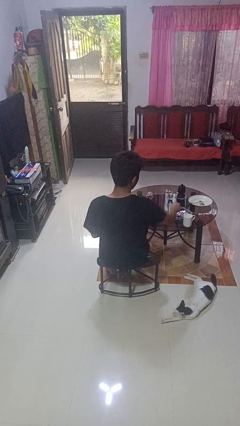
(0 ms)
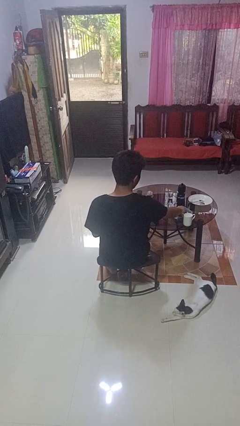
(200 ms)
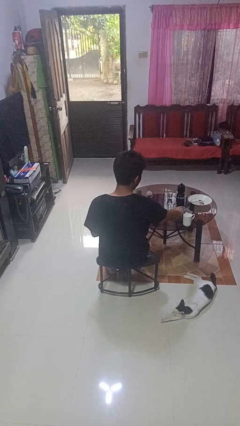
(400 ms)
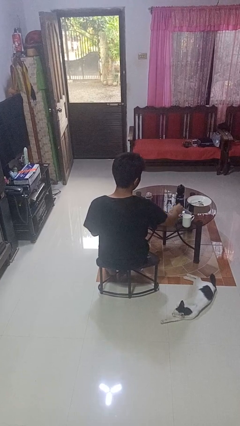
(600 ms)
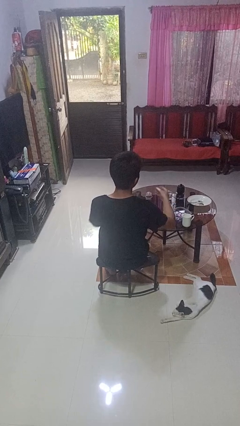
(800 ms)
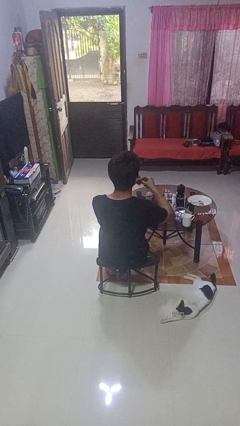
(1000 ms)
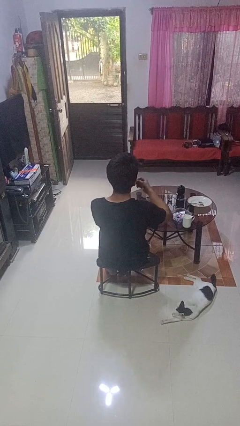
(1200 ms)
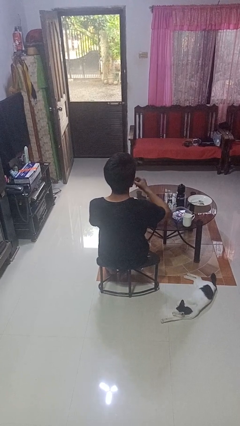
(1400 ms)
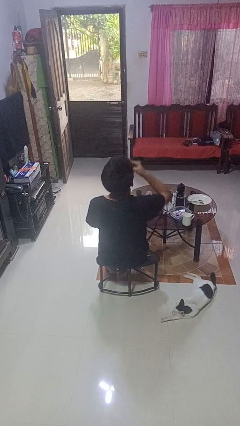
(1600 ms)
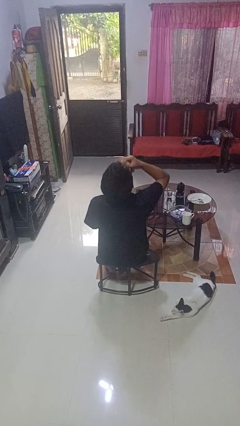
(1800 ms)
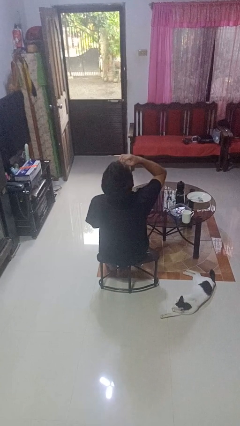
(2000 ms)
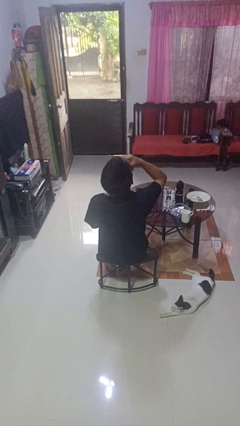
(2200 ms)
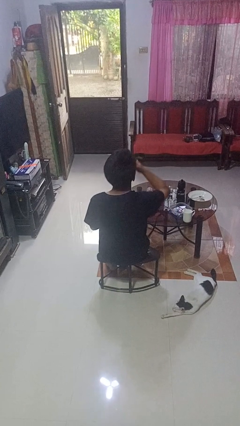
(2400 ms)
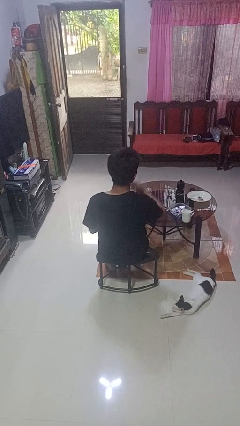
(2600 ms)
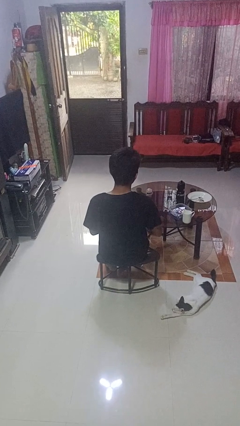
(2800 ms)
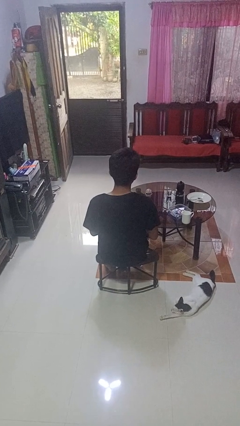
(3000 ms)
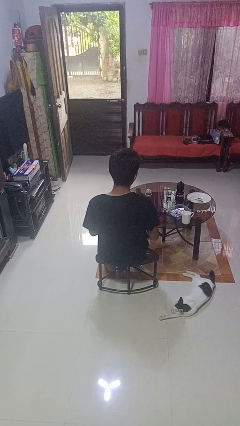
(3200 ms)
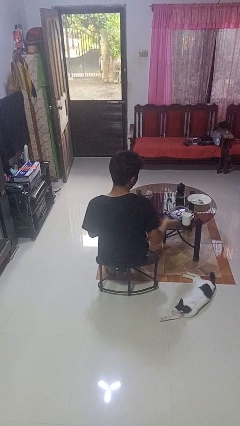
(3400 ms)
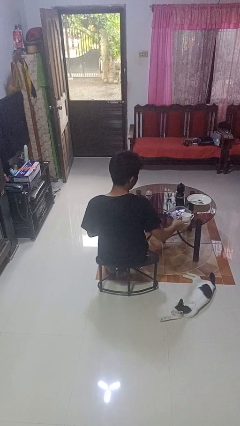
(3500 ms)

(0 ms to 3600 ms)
person takes medicine pills

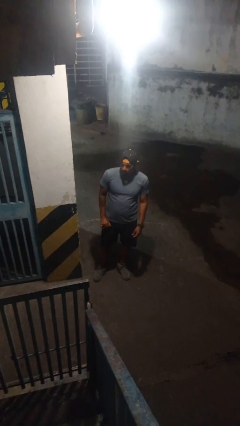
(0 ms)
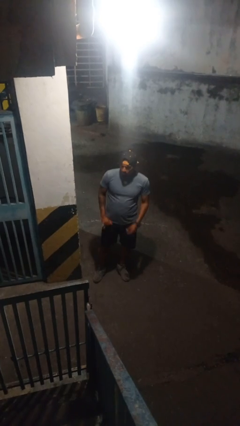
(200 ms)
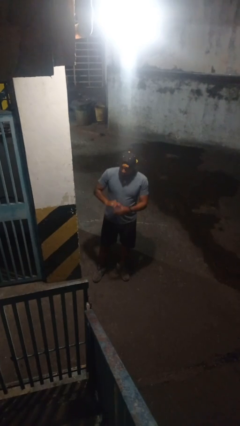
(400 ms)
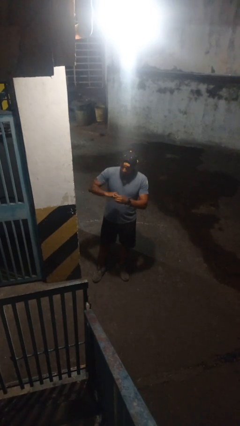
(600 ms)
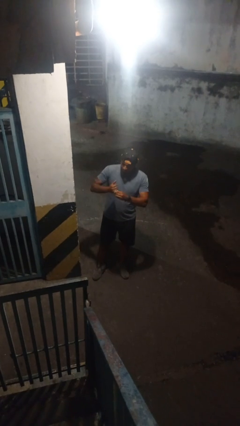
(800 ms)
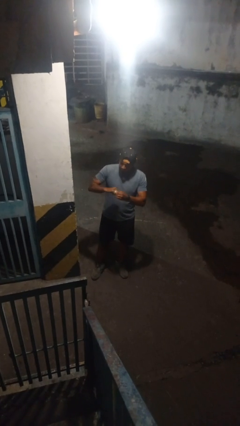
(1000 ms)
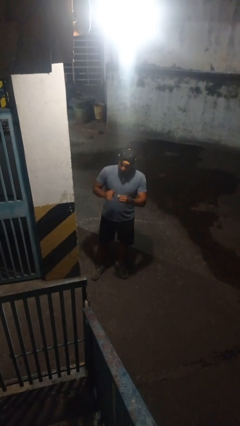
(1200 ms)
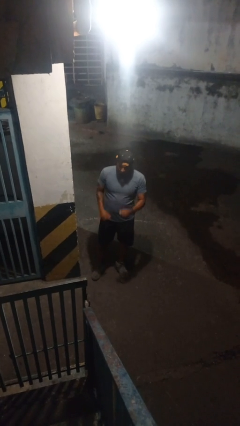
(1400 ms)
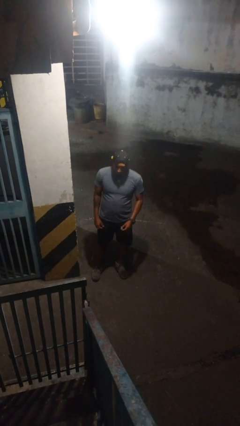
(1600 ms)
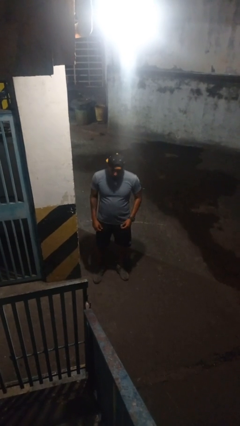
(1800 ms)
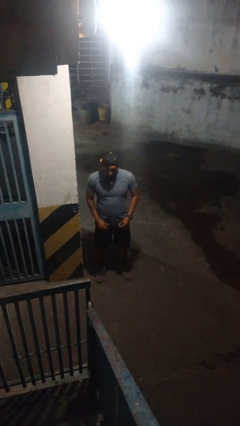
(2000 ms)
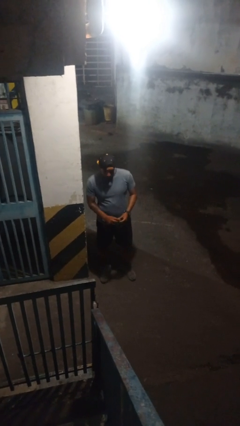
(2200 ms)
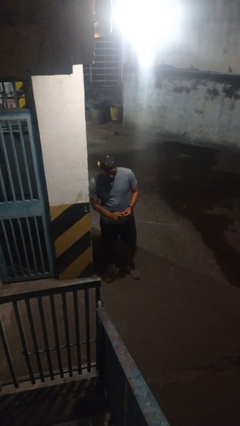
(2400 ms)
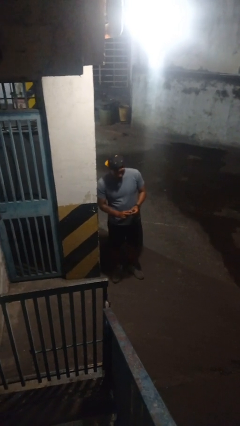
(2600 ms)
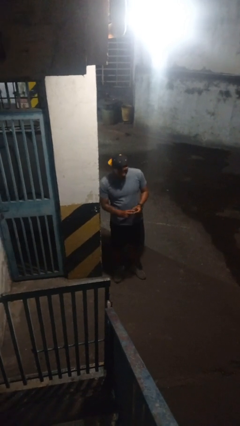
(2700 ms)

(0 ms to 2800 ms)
person takes off ring

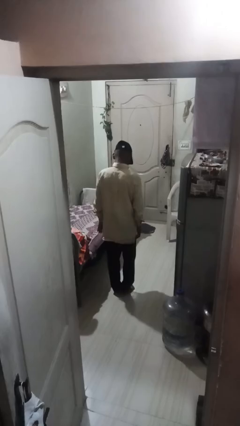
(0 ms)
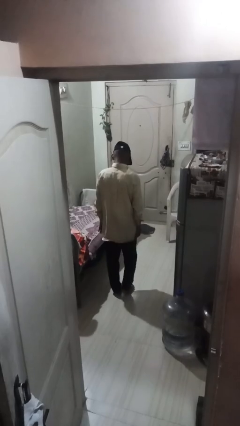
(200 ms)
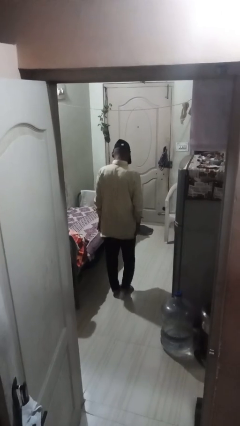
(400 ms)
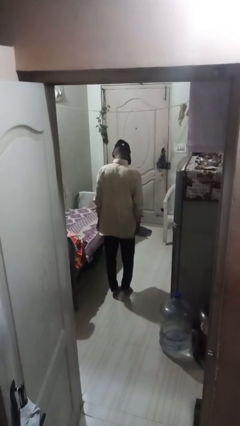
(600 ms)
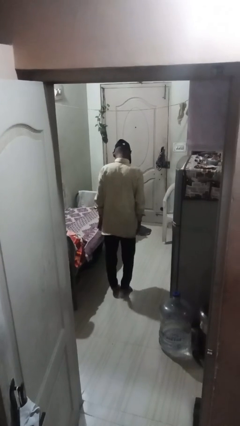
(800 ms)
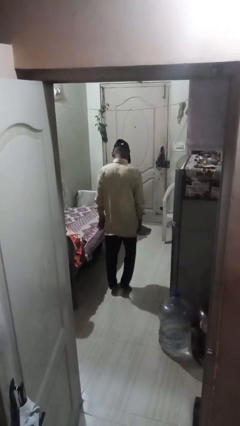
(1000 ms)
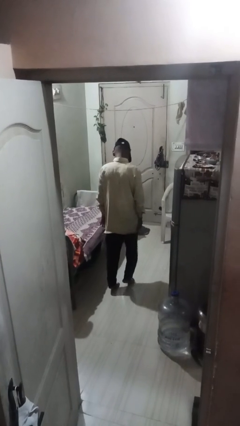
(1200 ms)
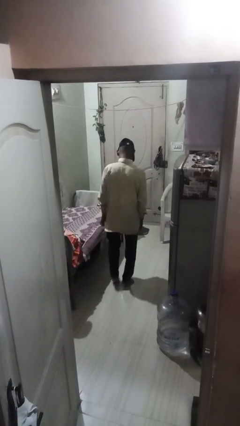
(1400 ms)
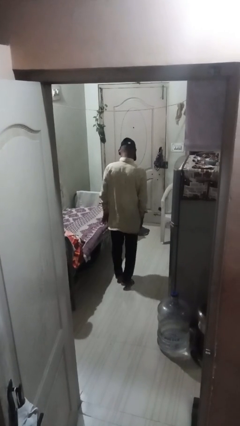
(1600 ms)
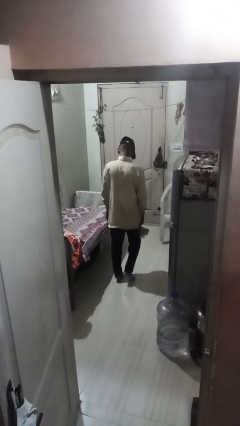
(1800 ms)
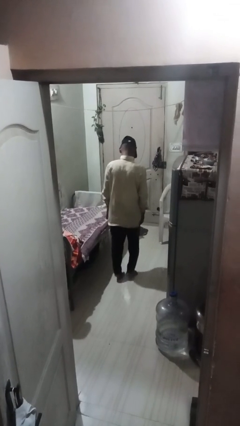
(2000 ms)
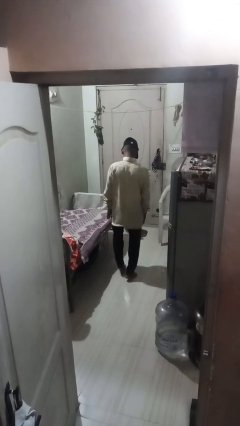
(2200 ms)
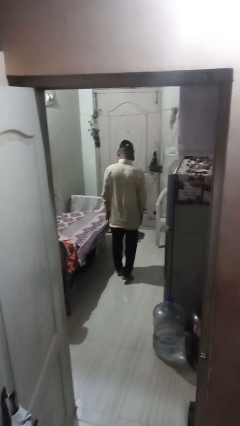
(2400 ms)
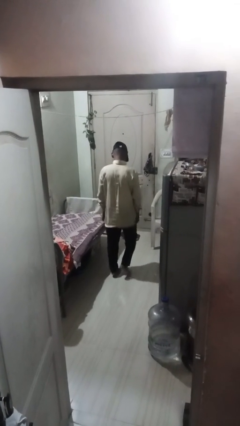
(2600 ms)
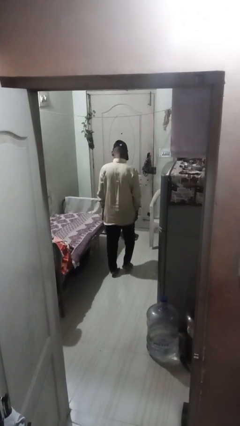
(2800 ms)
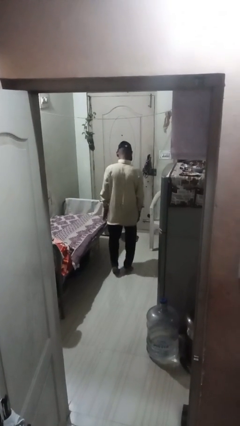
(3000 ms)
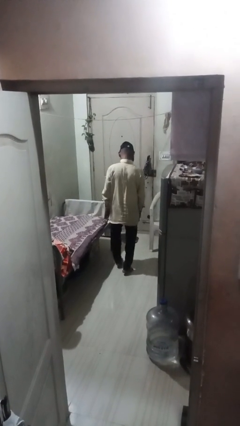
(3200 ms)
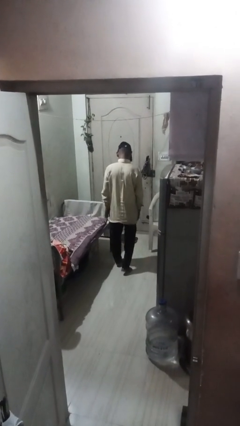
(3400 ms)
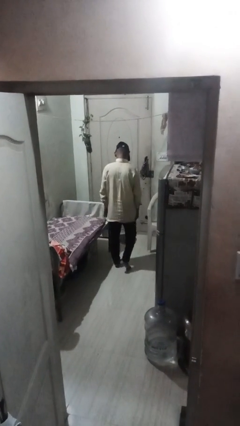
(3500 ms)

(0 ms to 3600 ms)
person walks tiptoe

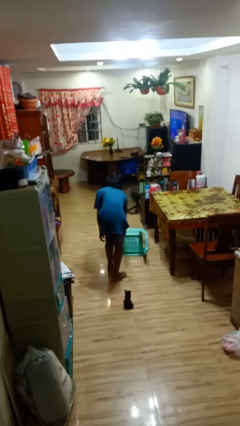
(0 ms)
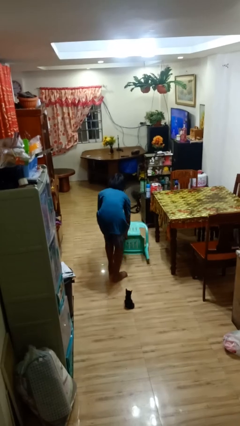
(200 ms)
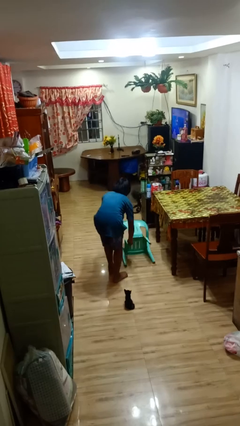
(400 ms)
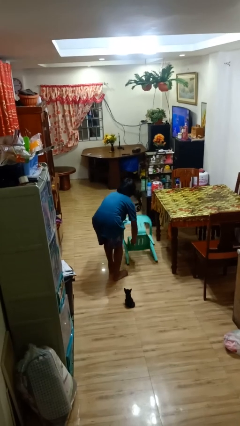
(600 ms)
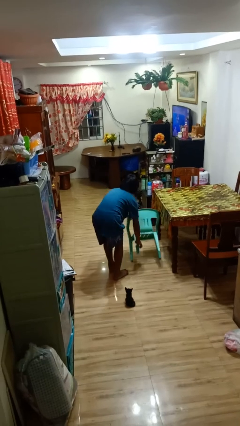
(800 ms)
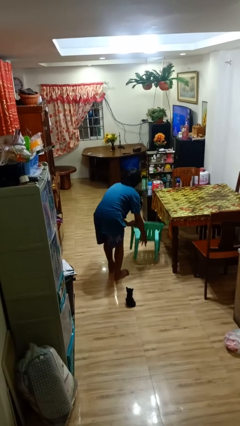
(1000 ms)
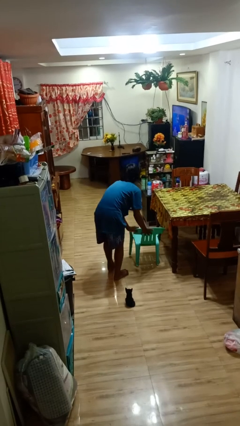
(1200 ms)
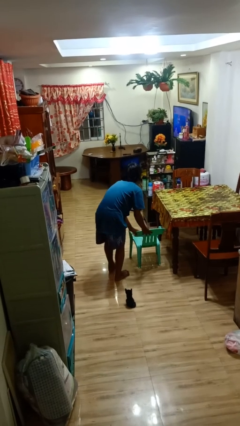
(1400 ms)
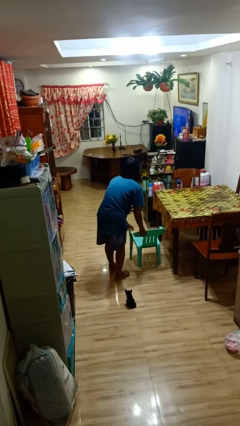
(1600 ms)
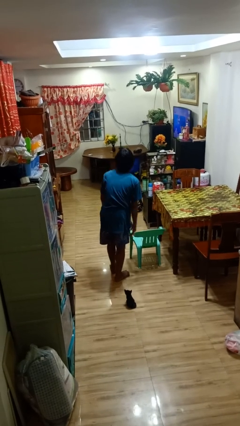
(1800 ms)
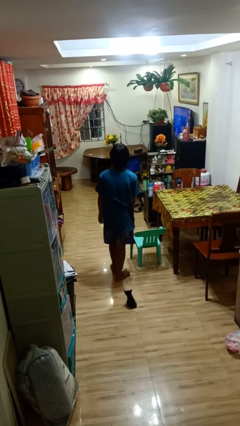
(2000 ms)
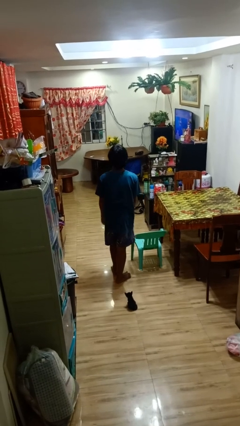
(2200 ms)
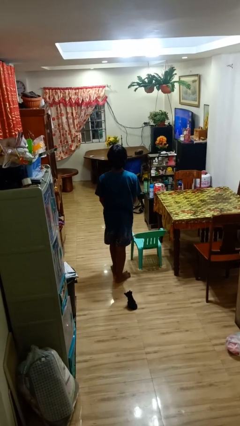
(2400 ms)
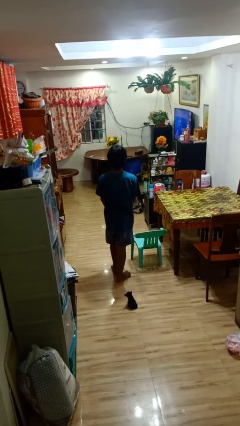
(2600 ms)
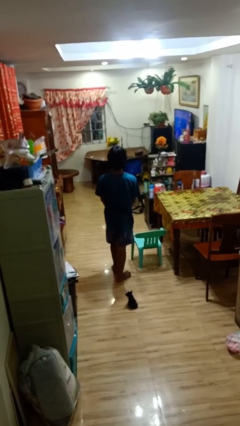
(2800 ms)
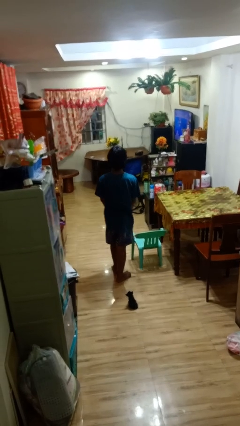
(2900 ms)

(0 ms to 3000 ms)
person sets upright furniture

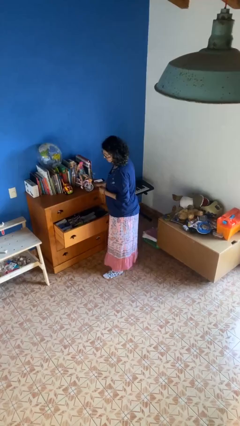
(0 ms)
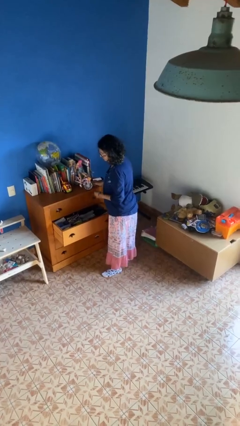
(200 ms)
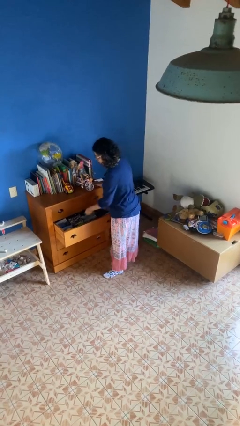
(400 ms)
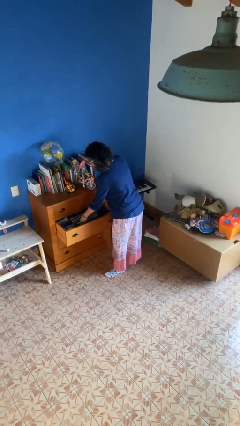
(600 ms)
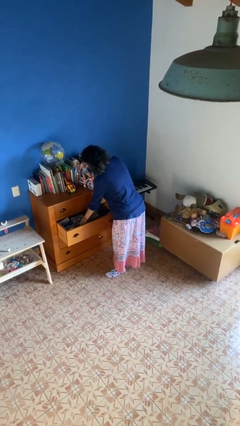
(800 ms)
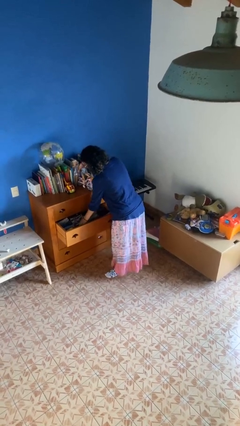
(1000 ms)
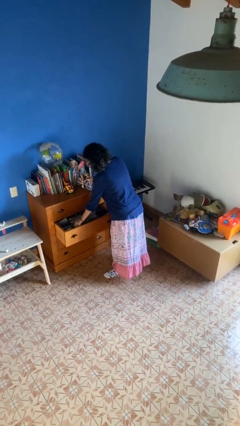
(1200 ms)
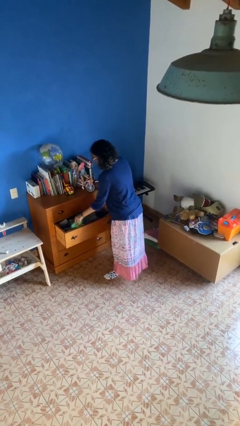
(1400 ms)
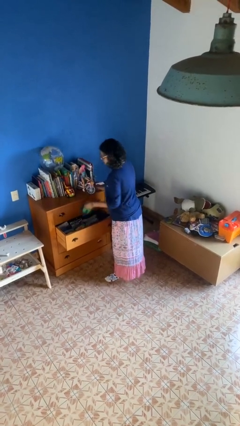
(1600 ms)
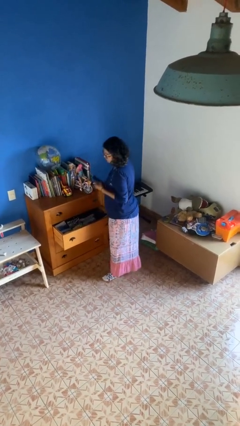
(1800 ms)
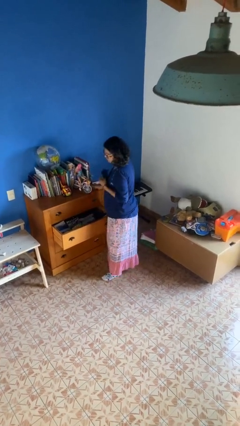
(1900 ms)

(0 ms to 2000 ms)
person takes clothes from dresser

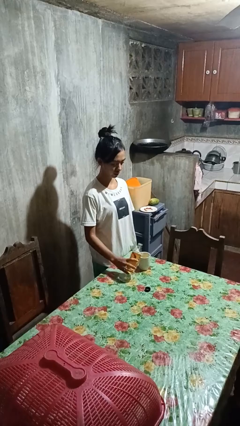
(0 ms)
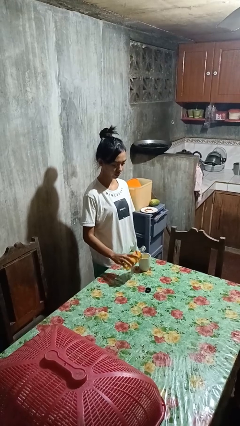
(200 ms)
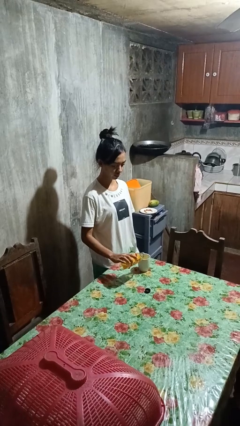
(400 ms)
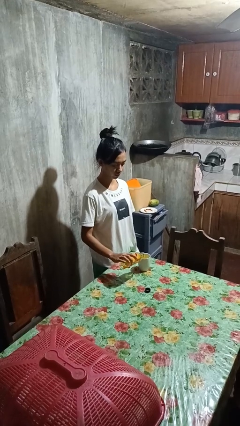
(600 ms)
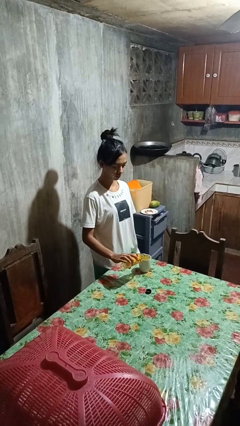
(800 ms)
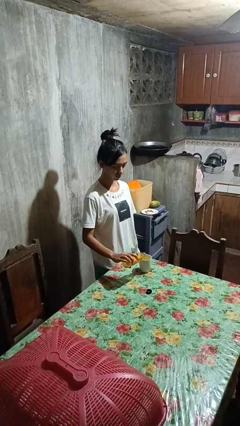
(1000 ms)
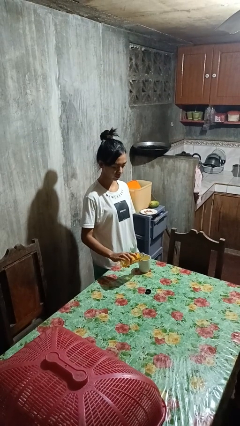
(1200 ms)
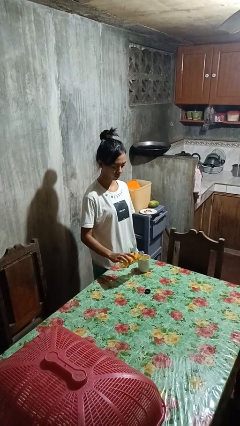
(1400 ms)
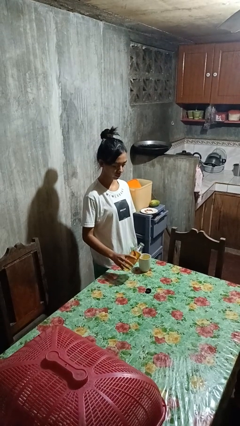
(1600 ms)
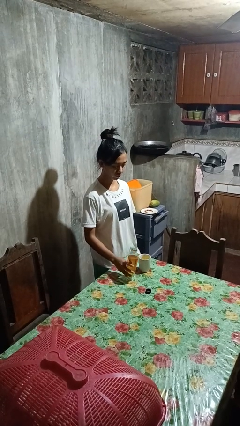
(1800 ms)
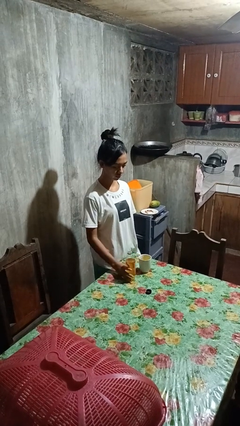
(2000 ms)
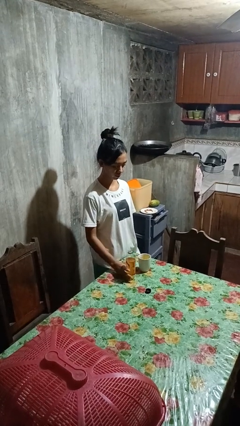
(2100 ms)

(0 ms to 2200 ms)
person pours liquid into cup
